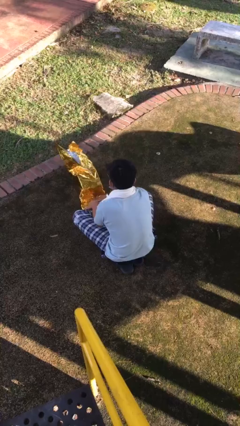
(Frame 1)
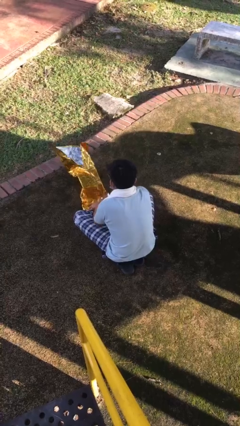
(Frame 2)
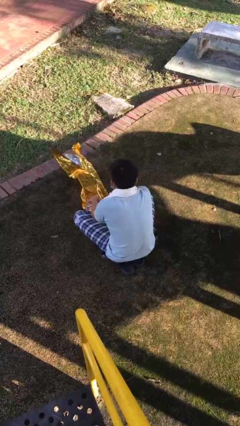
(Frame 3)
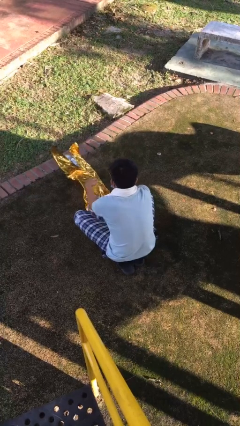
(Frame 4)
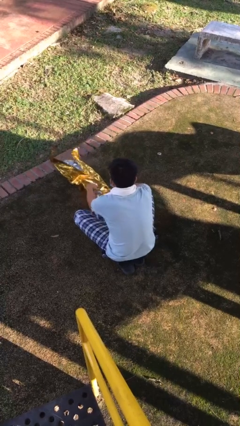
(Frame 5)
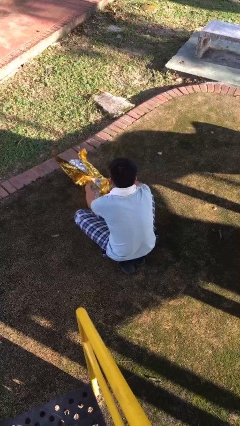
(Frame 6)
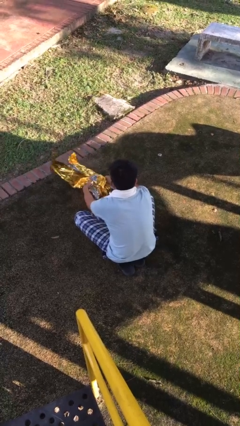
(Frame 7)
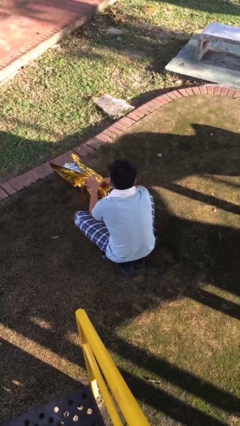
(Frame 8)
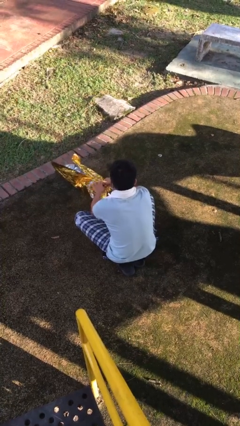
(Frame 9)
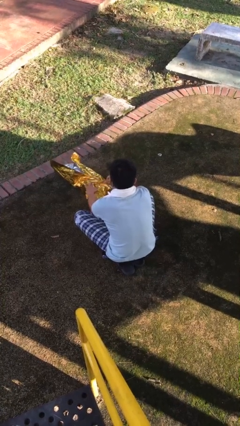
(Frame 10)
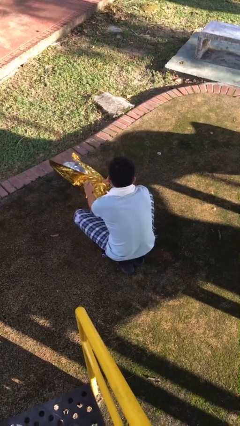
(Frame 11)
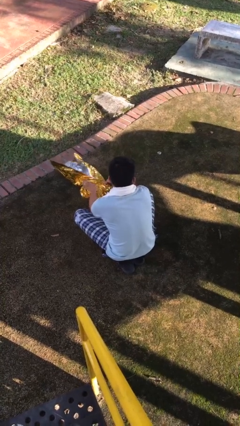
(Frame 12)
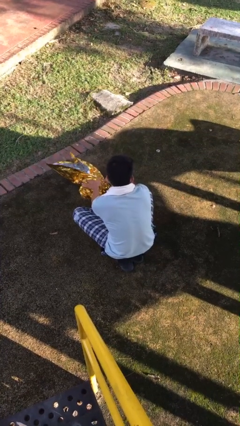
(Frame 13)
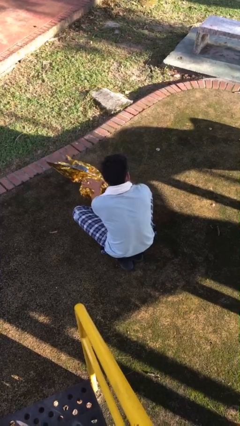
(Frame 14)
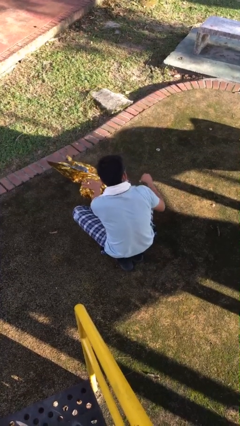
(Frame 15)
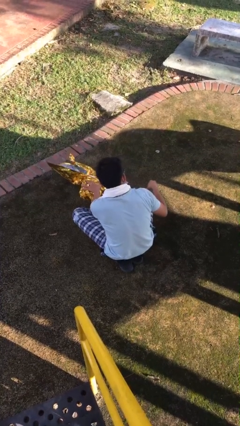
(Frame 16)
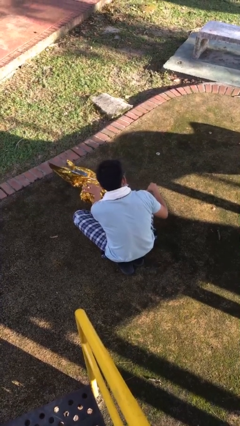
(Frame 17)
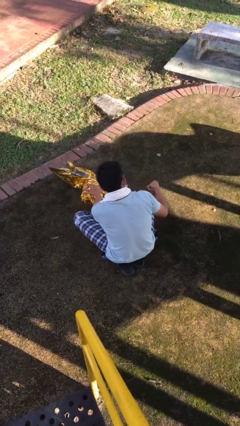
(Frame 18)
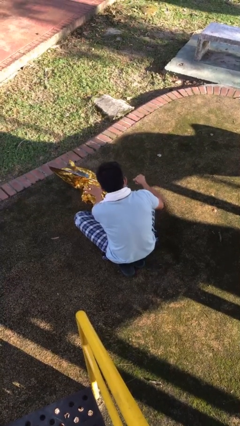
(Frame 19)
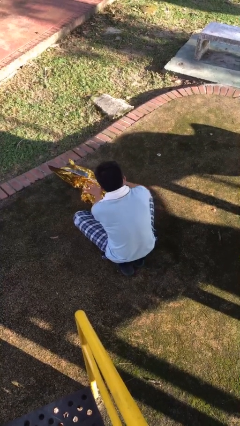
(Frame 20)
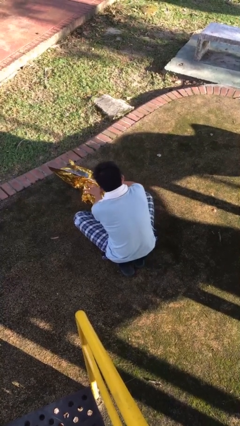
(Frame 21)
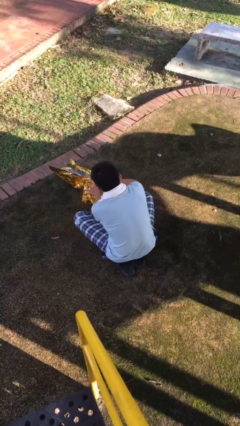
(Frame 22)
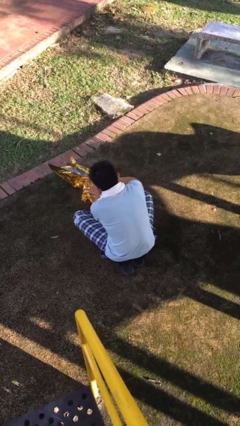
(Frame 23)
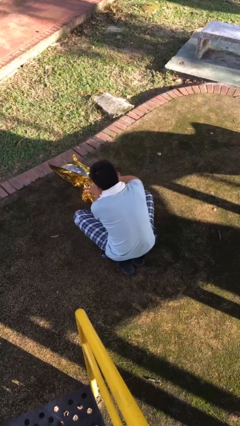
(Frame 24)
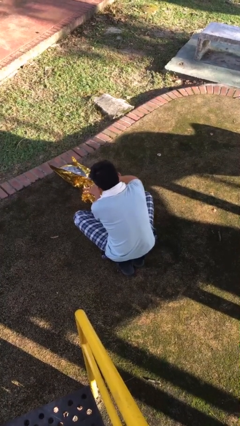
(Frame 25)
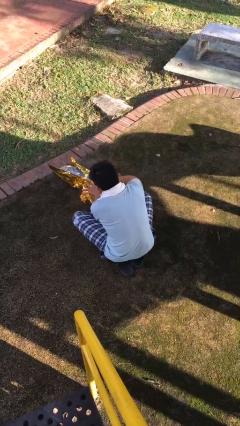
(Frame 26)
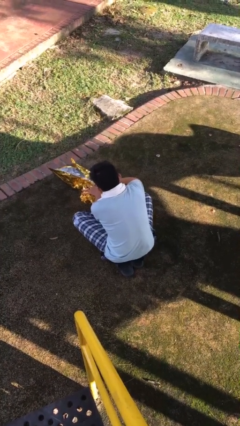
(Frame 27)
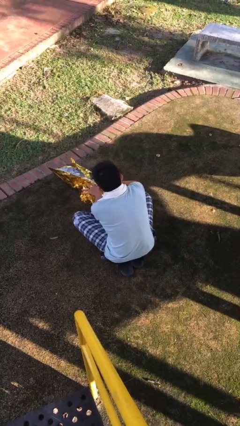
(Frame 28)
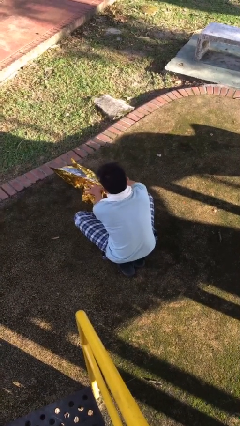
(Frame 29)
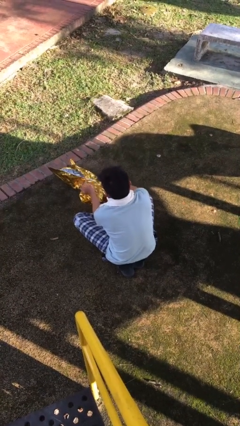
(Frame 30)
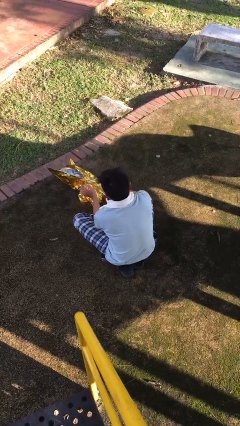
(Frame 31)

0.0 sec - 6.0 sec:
person wraps box

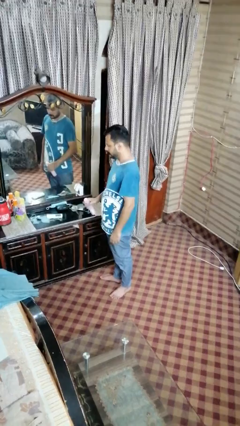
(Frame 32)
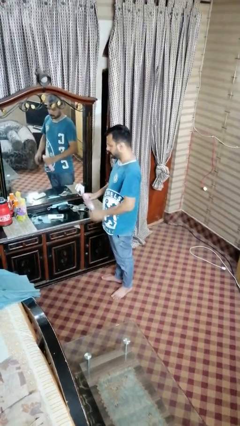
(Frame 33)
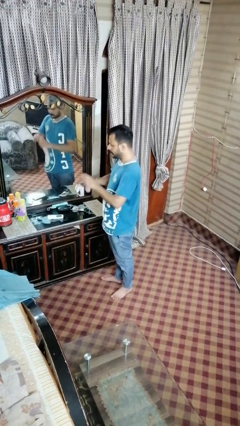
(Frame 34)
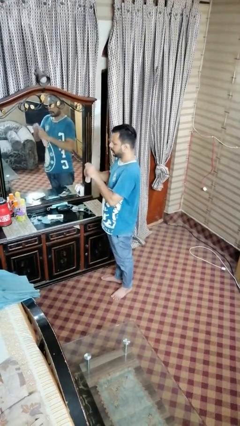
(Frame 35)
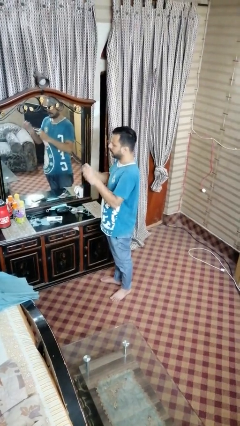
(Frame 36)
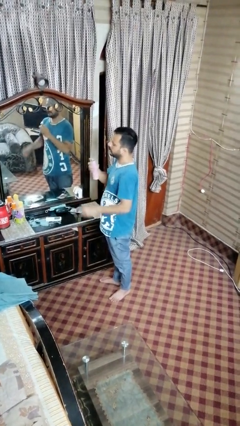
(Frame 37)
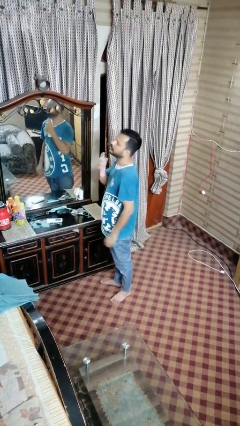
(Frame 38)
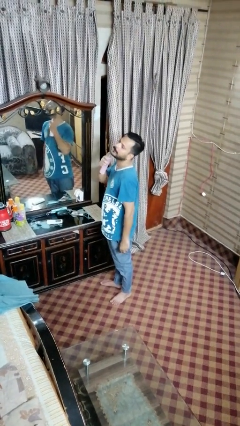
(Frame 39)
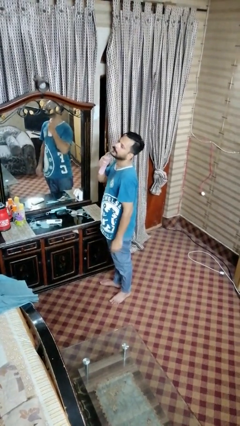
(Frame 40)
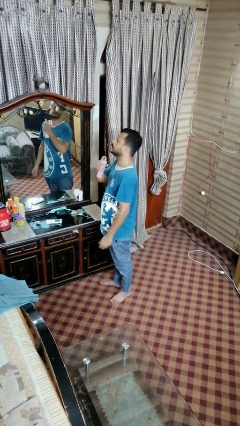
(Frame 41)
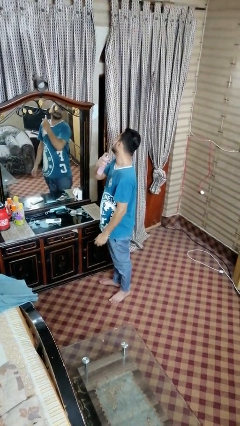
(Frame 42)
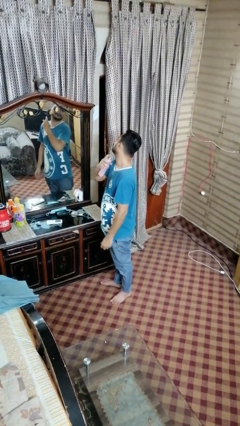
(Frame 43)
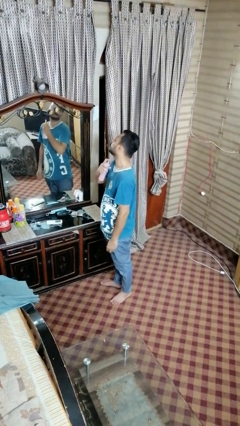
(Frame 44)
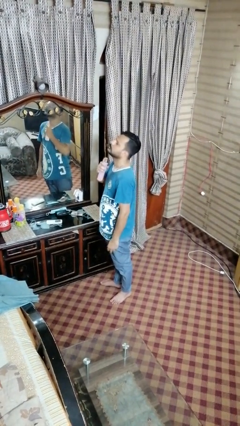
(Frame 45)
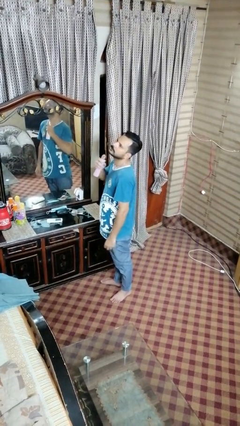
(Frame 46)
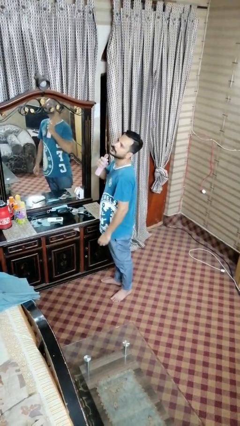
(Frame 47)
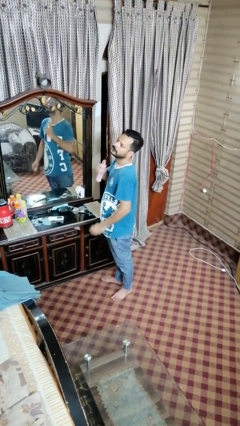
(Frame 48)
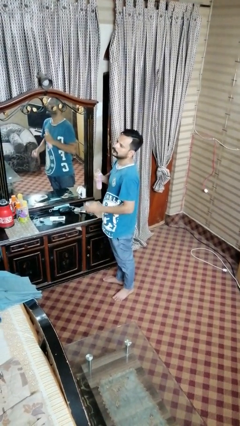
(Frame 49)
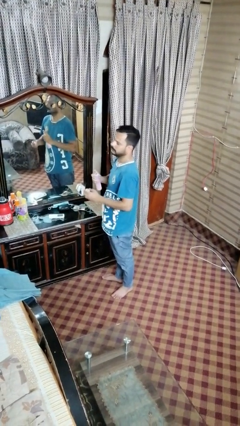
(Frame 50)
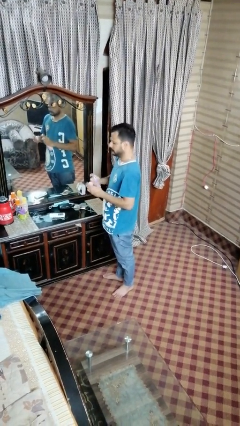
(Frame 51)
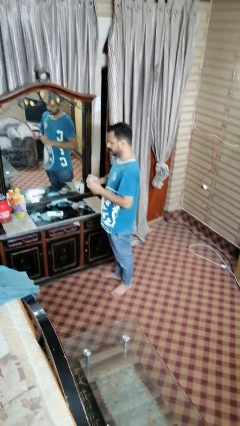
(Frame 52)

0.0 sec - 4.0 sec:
person sprays from bottle

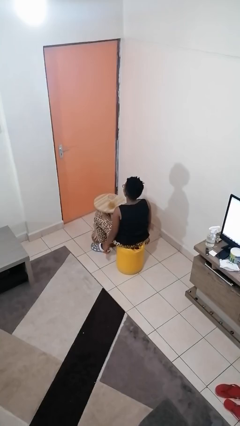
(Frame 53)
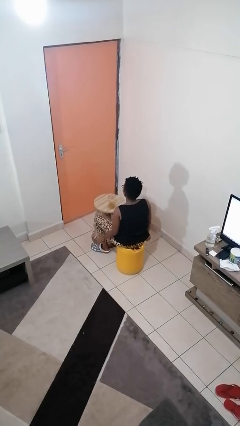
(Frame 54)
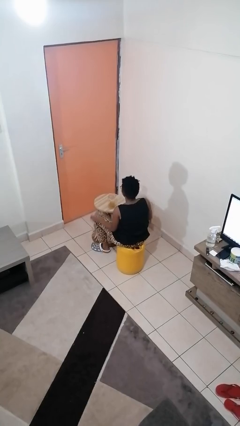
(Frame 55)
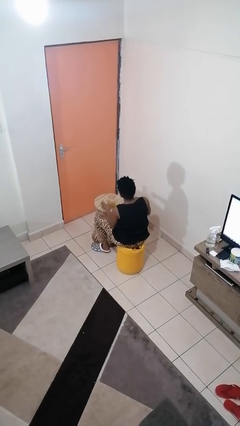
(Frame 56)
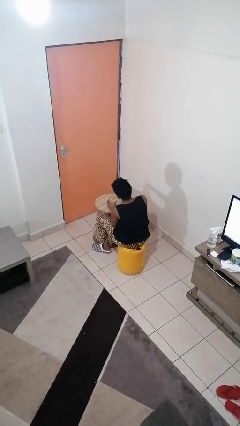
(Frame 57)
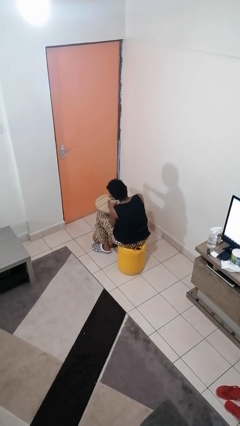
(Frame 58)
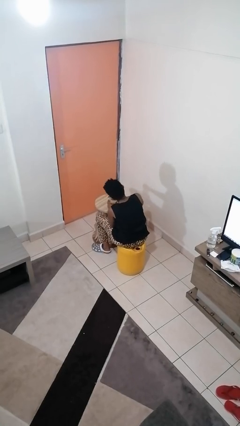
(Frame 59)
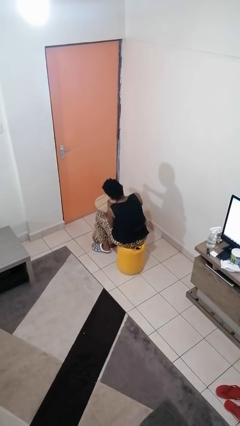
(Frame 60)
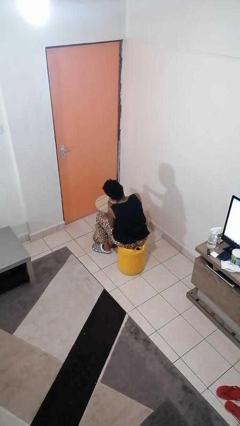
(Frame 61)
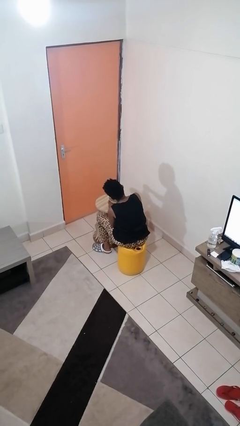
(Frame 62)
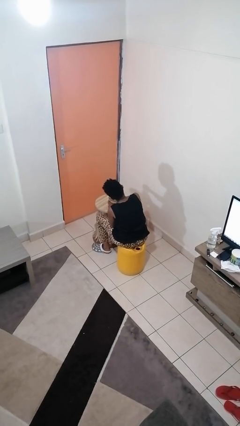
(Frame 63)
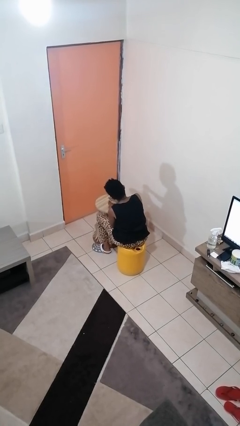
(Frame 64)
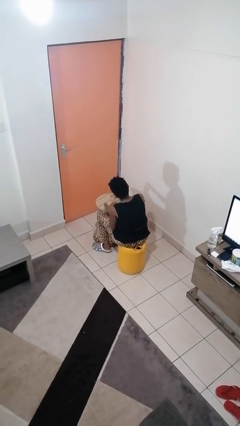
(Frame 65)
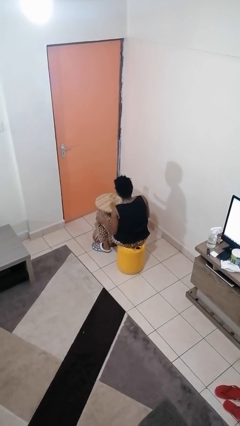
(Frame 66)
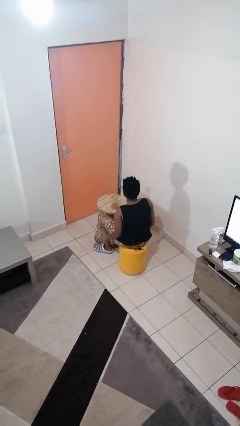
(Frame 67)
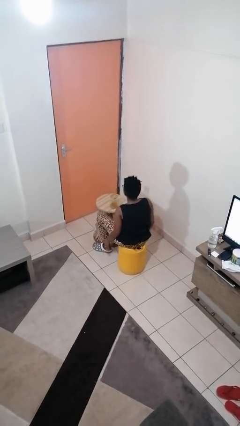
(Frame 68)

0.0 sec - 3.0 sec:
person closes jar

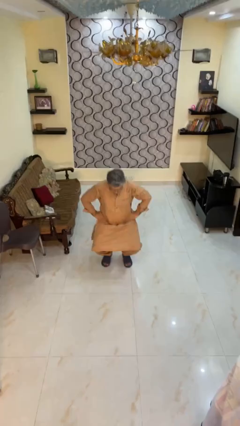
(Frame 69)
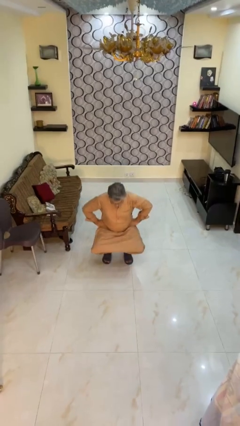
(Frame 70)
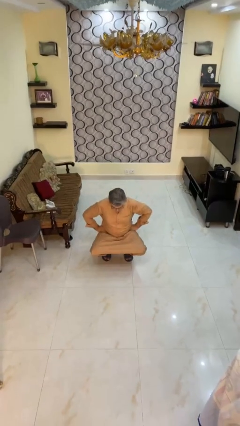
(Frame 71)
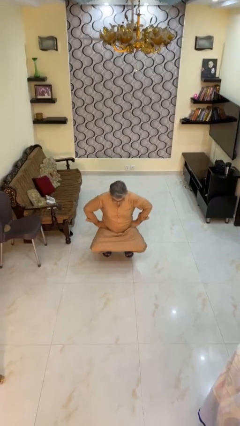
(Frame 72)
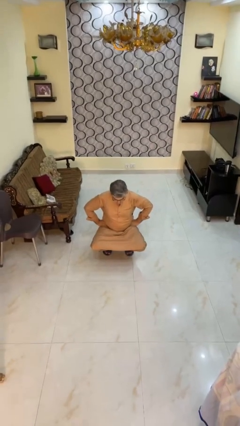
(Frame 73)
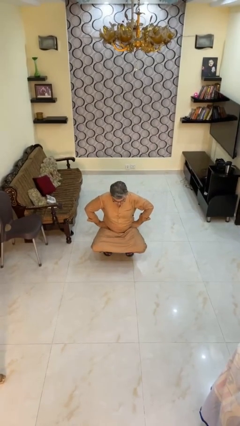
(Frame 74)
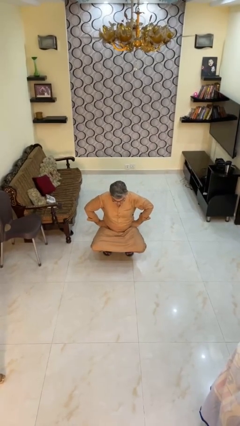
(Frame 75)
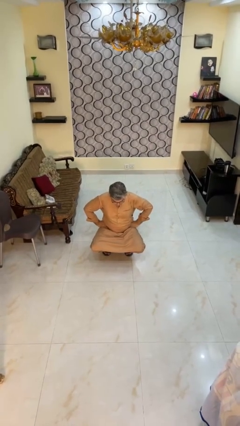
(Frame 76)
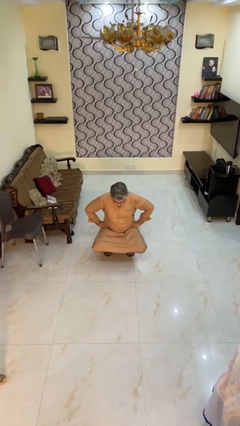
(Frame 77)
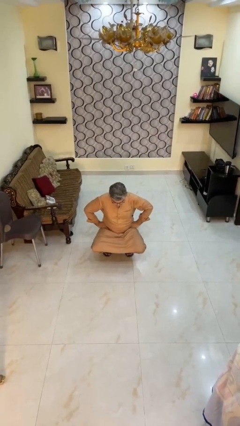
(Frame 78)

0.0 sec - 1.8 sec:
person squats

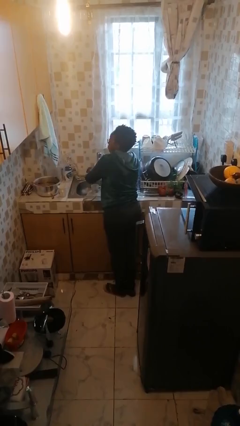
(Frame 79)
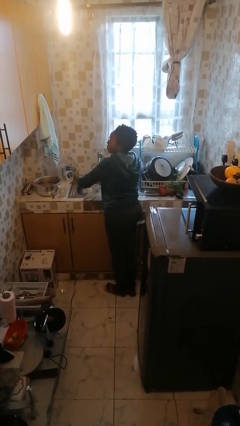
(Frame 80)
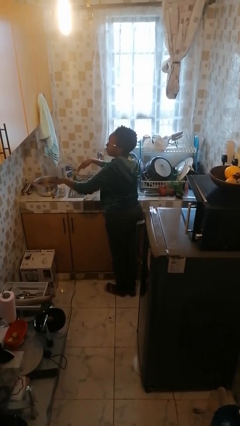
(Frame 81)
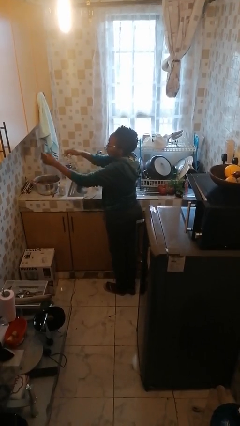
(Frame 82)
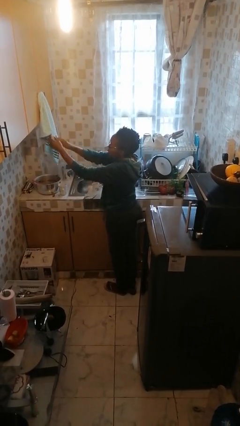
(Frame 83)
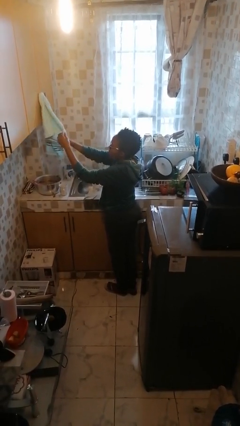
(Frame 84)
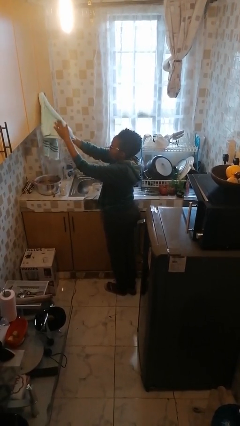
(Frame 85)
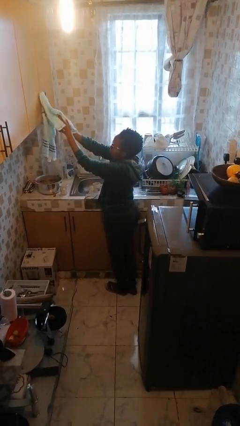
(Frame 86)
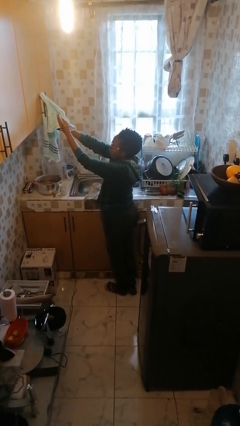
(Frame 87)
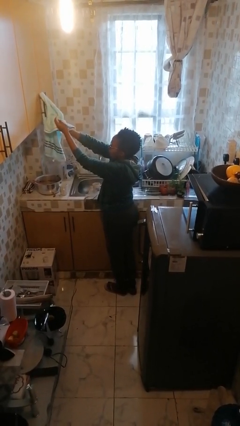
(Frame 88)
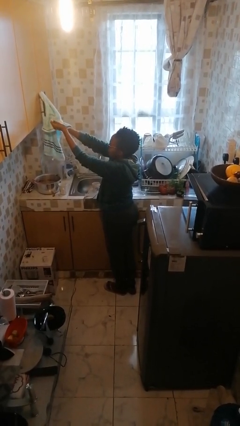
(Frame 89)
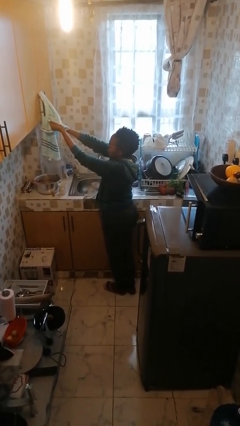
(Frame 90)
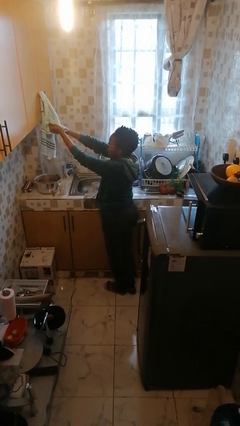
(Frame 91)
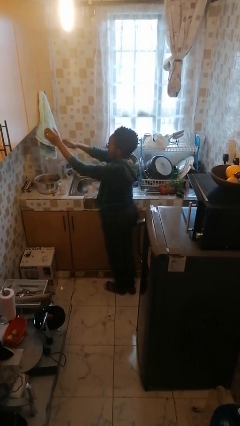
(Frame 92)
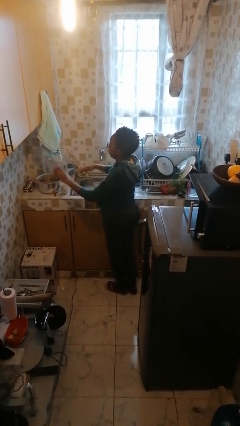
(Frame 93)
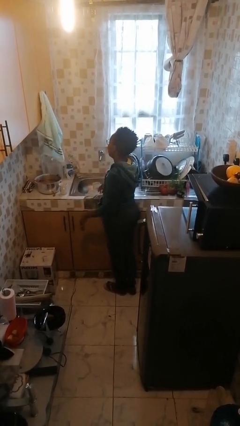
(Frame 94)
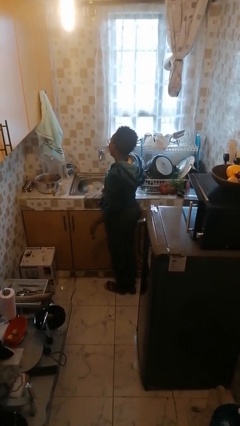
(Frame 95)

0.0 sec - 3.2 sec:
person dries hands with towel
